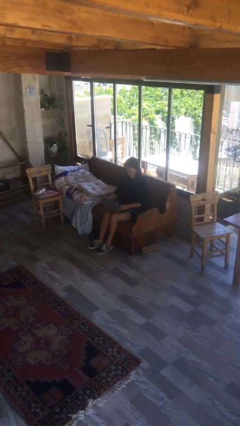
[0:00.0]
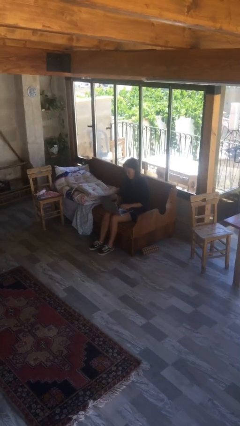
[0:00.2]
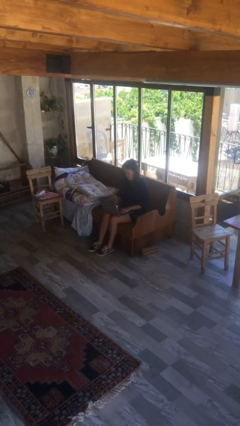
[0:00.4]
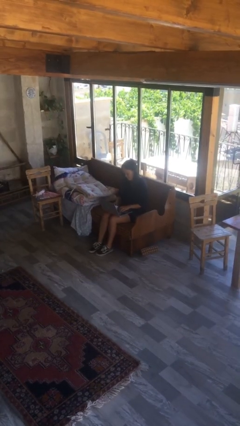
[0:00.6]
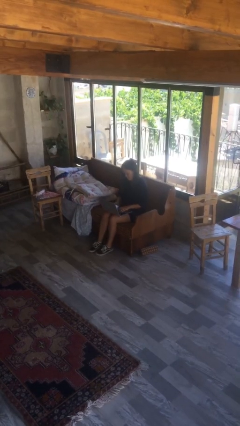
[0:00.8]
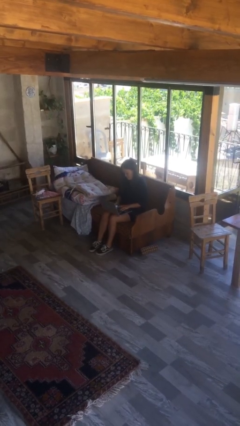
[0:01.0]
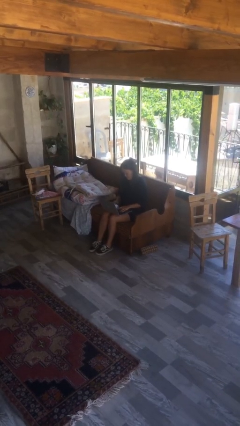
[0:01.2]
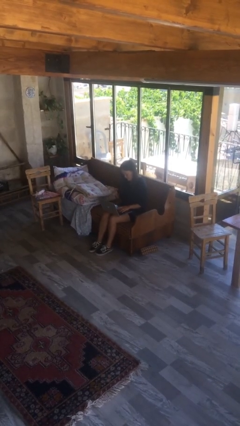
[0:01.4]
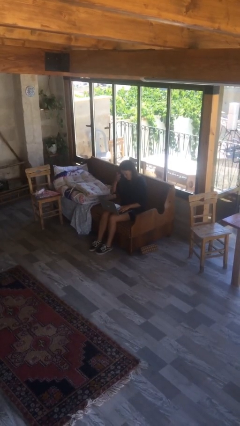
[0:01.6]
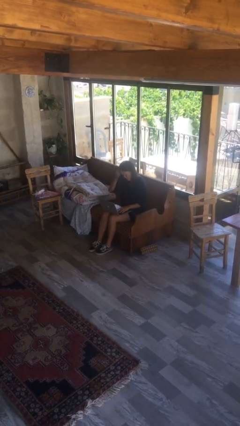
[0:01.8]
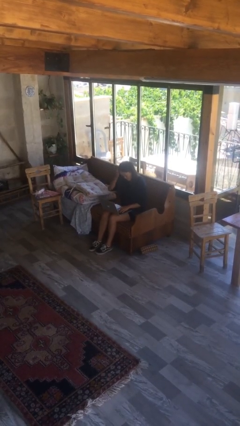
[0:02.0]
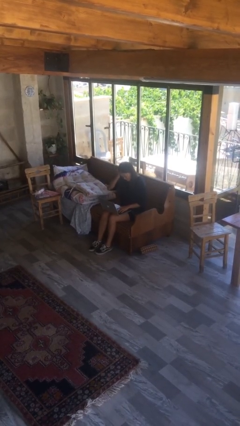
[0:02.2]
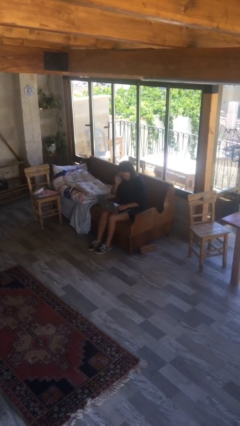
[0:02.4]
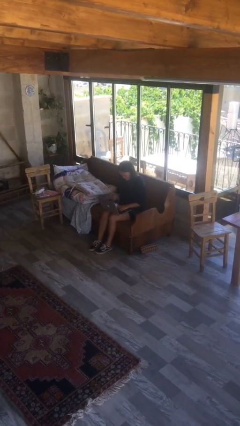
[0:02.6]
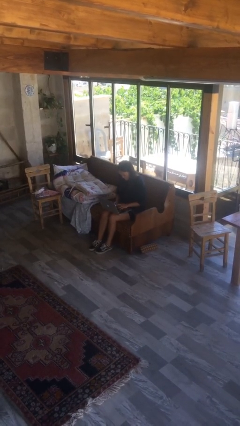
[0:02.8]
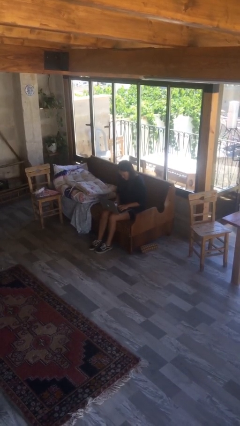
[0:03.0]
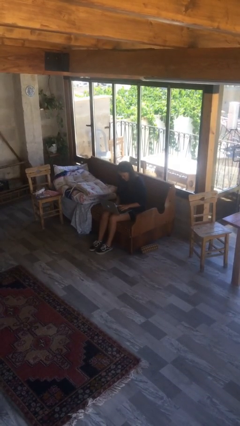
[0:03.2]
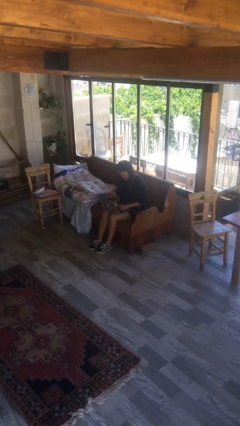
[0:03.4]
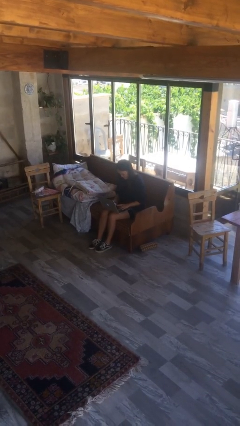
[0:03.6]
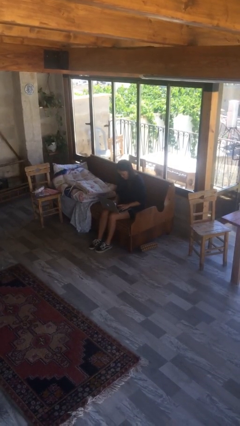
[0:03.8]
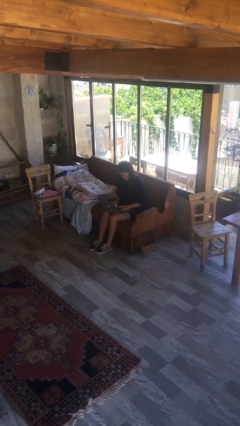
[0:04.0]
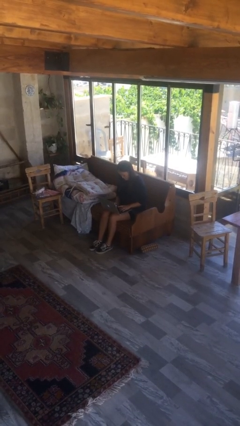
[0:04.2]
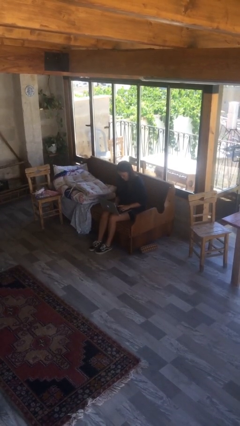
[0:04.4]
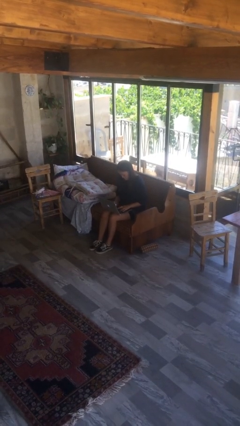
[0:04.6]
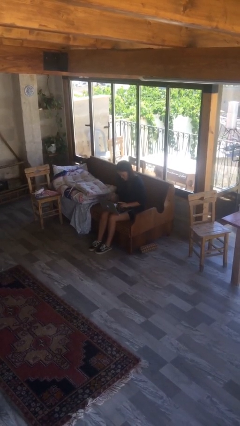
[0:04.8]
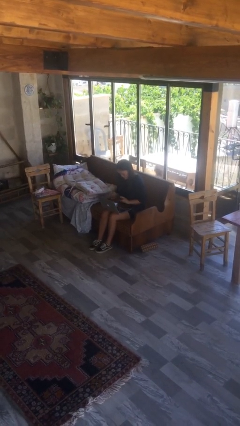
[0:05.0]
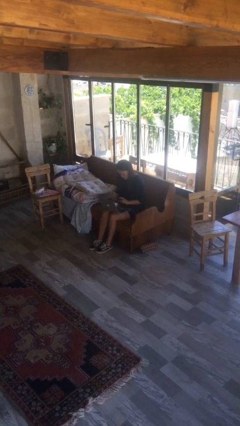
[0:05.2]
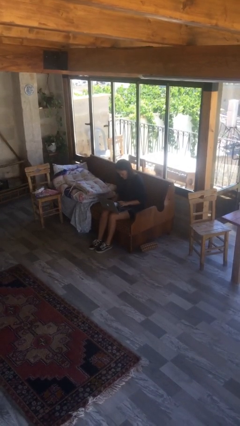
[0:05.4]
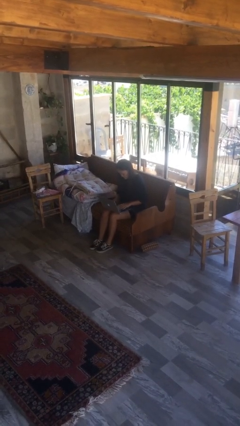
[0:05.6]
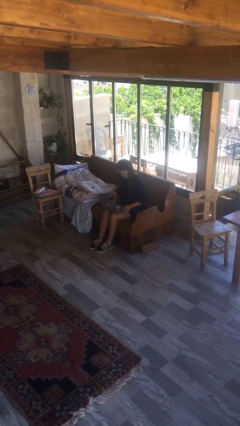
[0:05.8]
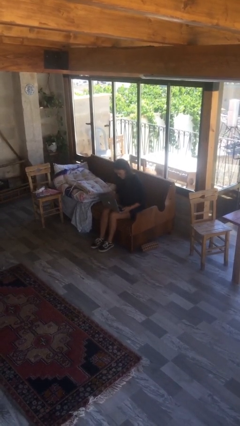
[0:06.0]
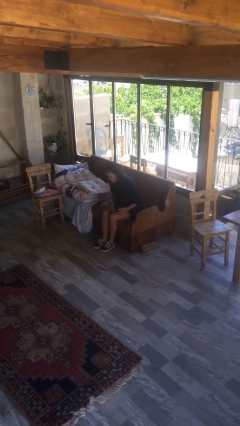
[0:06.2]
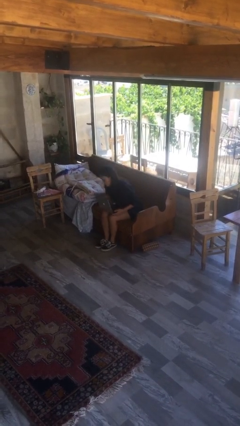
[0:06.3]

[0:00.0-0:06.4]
person interacts with laptop

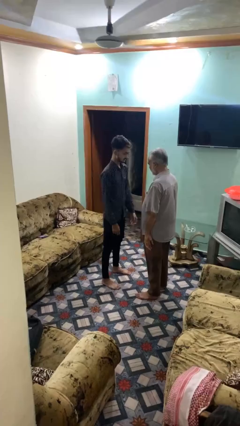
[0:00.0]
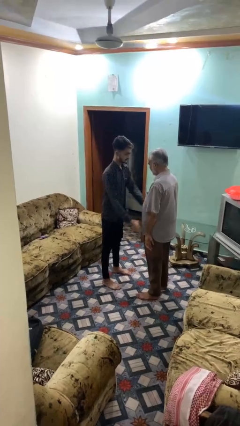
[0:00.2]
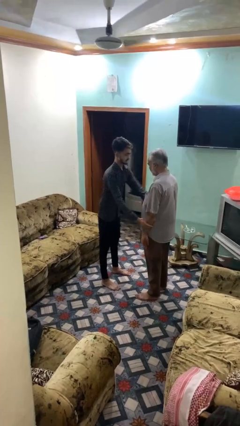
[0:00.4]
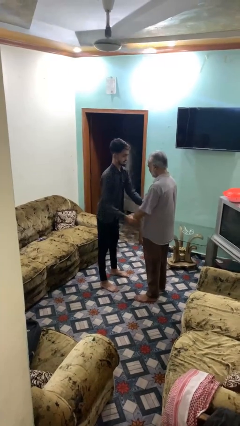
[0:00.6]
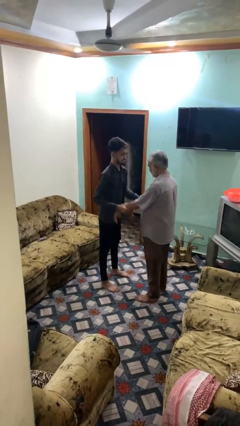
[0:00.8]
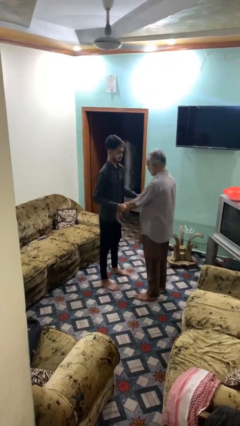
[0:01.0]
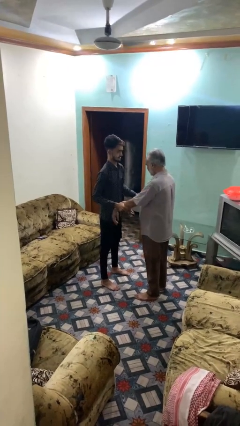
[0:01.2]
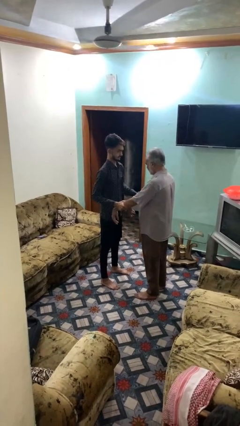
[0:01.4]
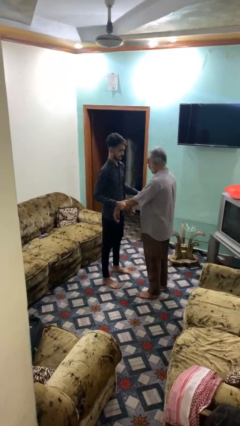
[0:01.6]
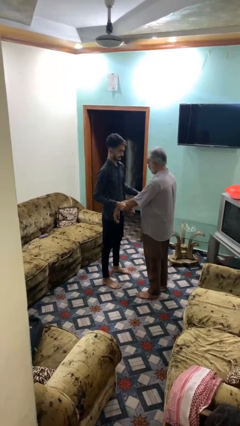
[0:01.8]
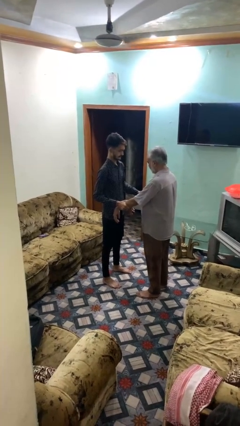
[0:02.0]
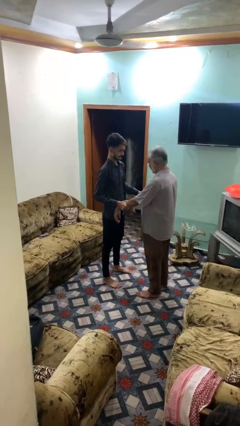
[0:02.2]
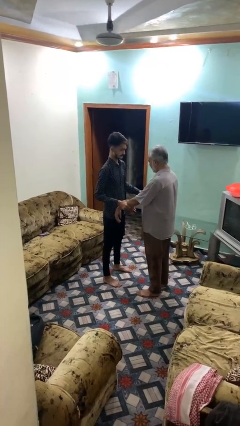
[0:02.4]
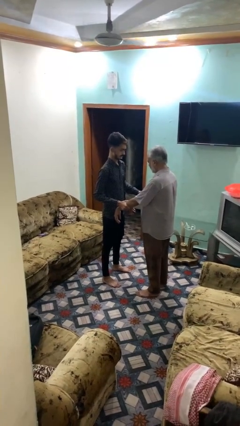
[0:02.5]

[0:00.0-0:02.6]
person grabs person by forearm

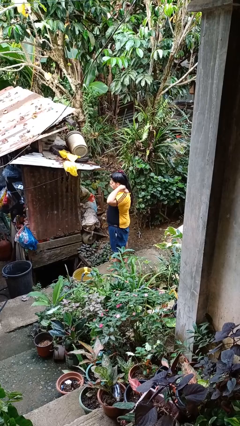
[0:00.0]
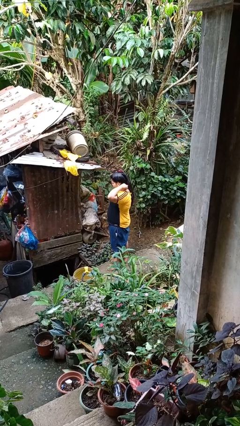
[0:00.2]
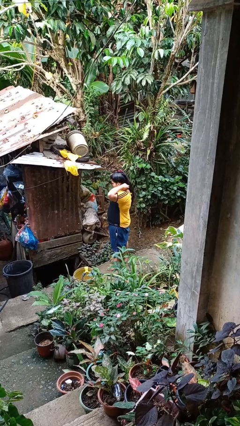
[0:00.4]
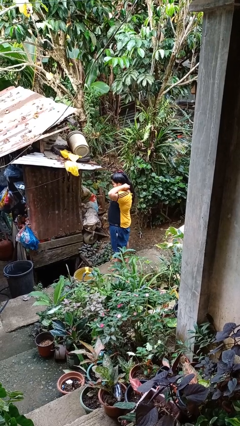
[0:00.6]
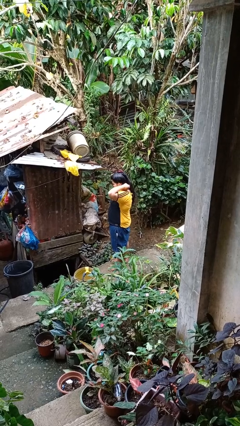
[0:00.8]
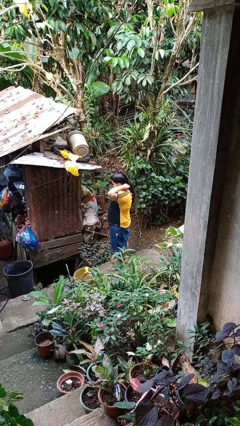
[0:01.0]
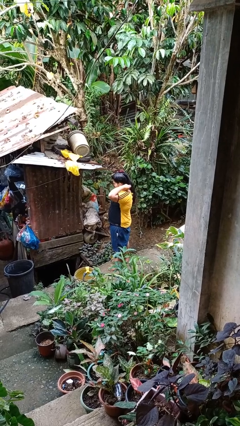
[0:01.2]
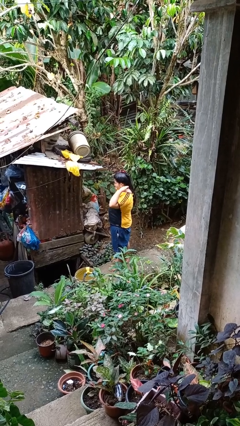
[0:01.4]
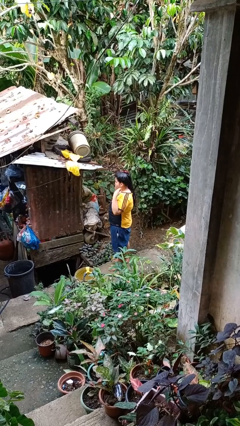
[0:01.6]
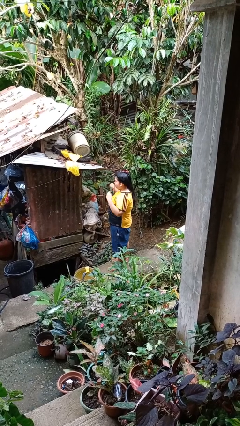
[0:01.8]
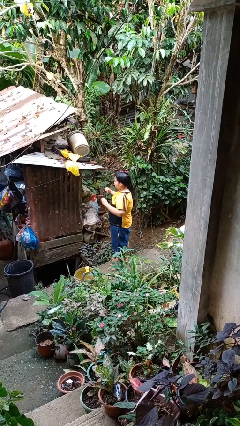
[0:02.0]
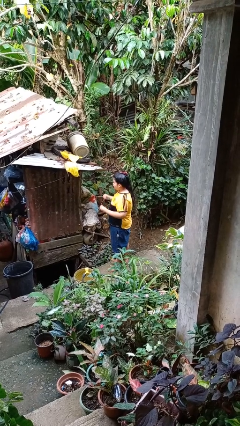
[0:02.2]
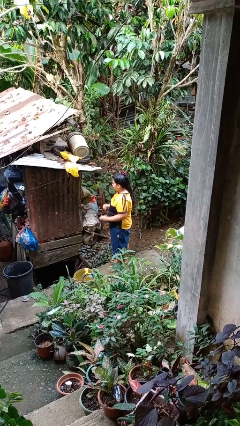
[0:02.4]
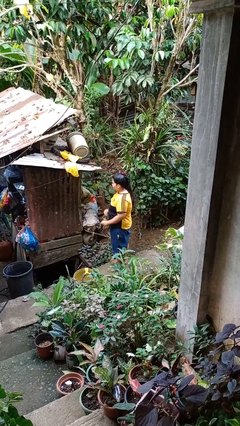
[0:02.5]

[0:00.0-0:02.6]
person takes off necklace

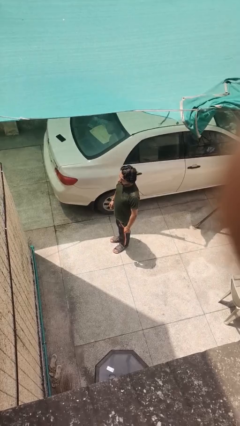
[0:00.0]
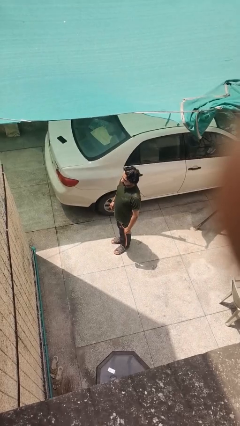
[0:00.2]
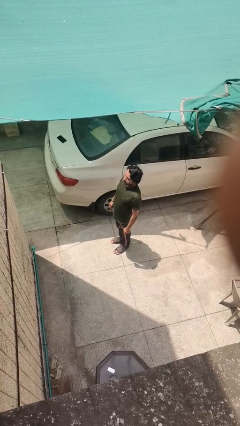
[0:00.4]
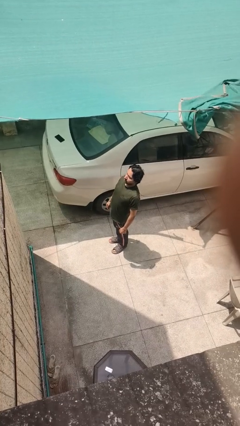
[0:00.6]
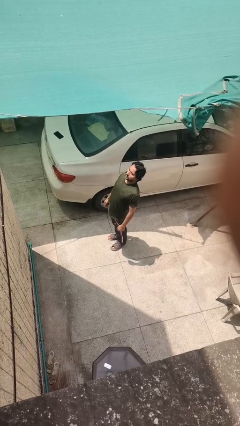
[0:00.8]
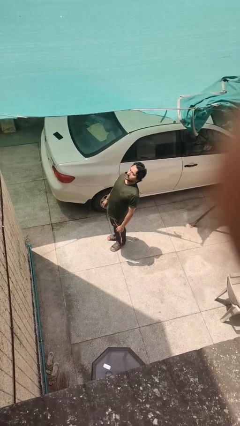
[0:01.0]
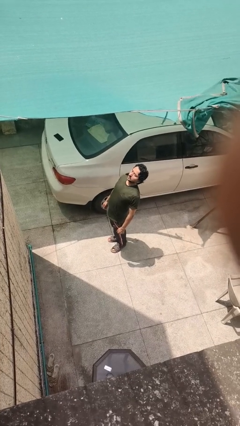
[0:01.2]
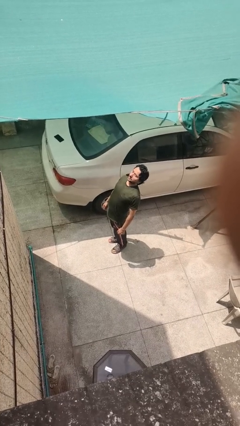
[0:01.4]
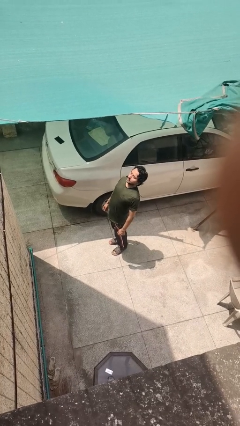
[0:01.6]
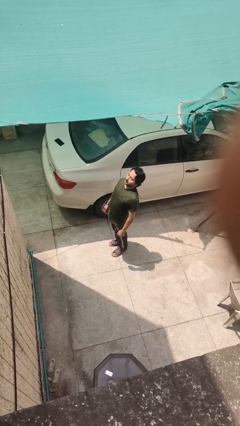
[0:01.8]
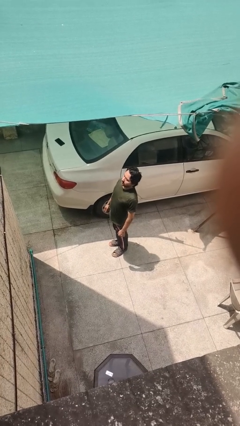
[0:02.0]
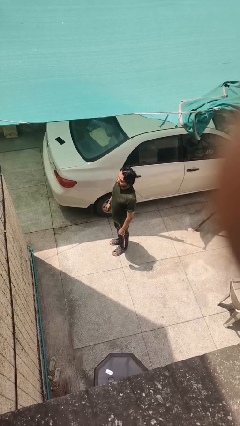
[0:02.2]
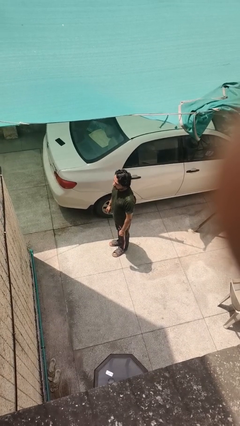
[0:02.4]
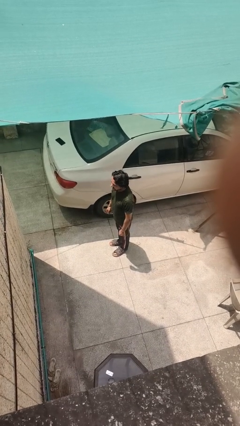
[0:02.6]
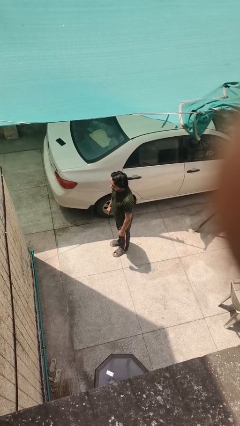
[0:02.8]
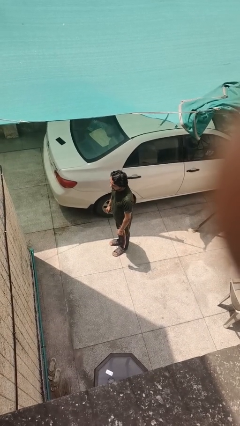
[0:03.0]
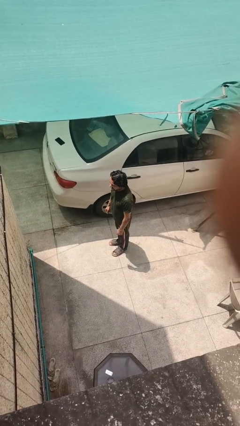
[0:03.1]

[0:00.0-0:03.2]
person stretches back

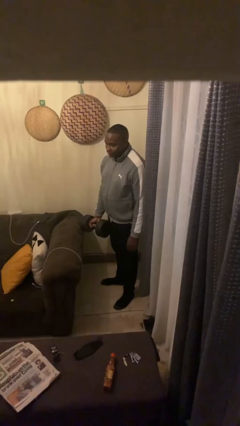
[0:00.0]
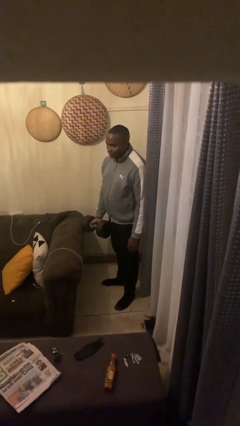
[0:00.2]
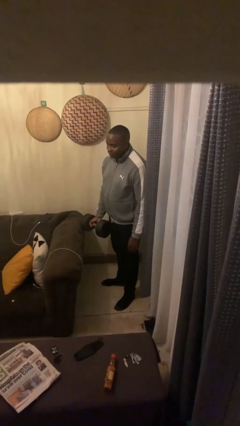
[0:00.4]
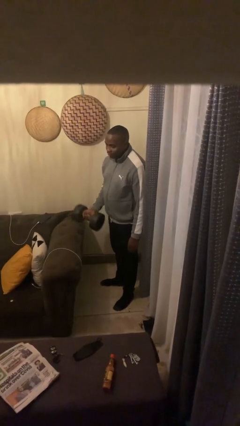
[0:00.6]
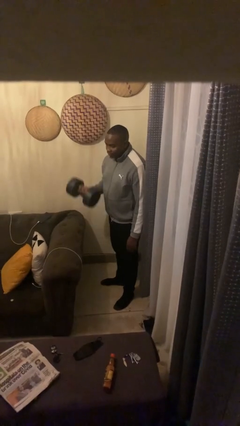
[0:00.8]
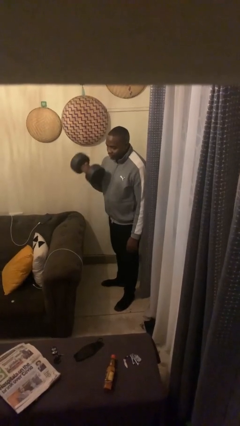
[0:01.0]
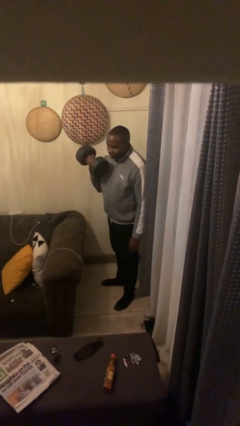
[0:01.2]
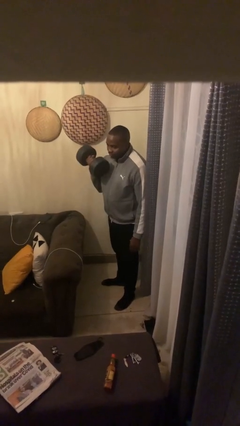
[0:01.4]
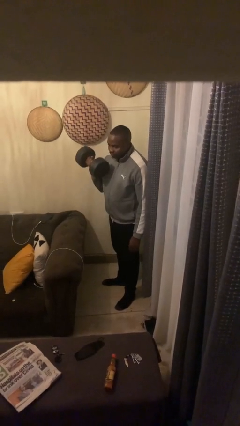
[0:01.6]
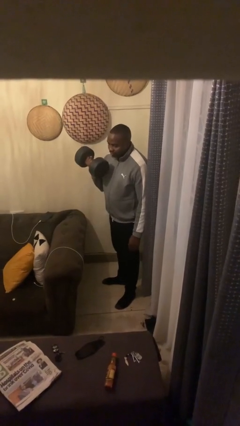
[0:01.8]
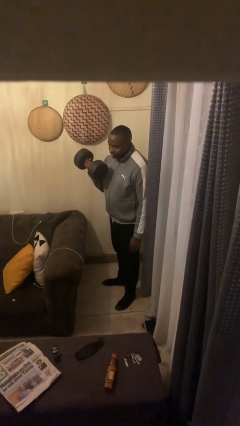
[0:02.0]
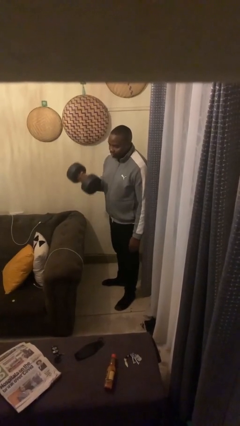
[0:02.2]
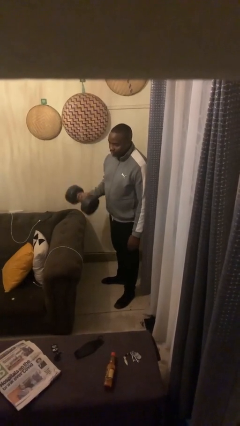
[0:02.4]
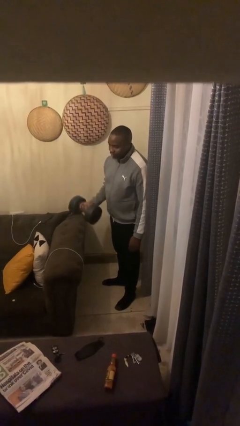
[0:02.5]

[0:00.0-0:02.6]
person lifts dumbbells

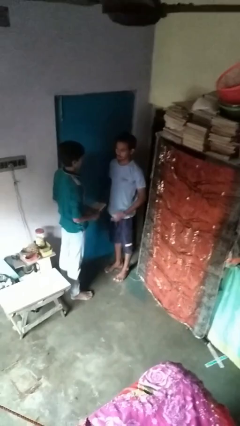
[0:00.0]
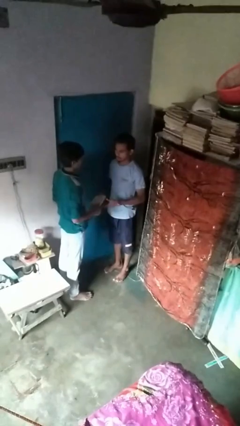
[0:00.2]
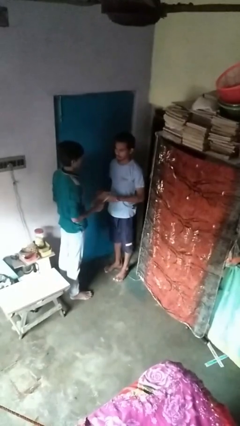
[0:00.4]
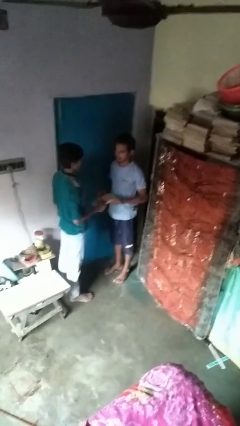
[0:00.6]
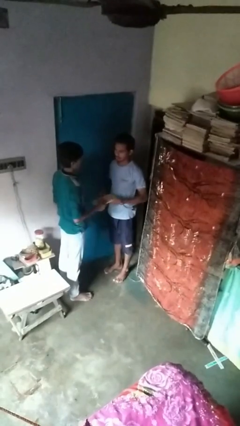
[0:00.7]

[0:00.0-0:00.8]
person transfers object to person
